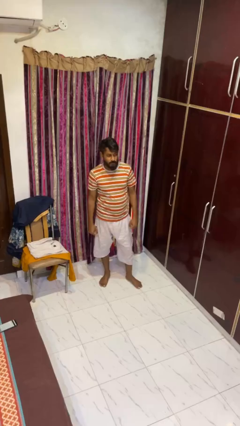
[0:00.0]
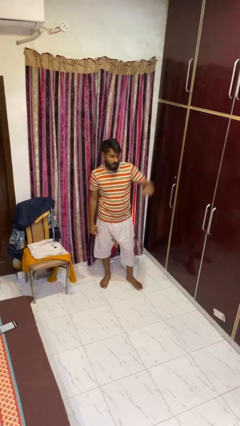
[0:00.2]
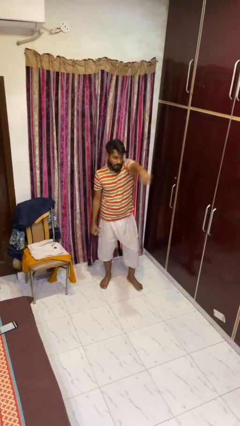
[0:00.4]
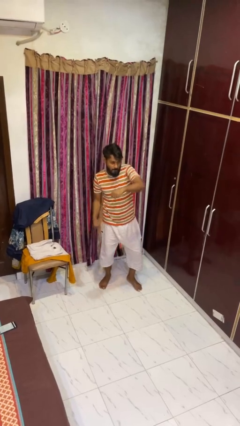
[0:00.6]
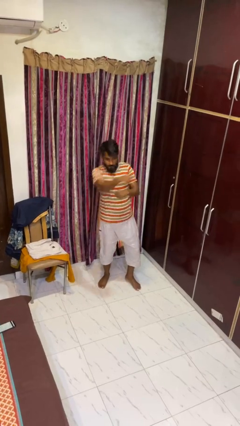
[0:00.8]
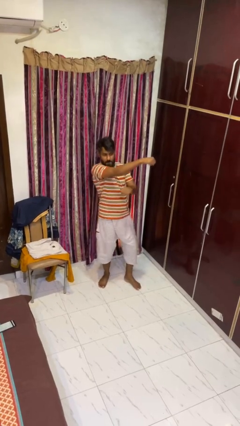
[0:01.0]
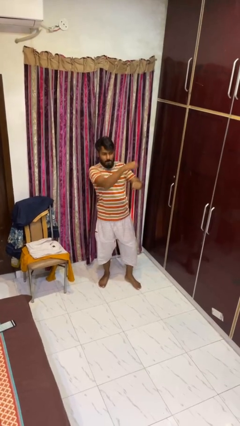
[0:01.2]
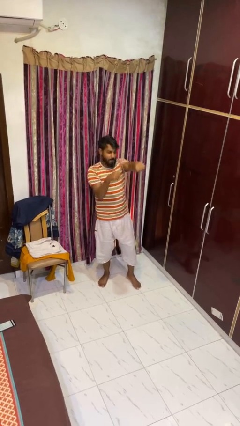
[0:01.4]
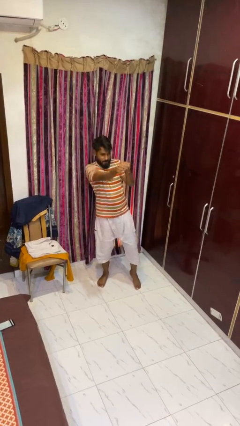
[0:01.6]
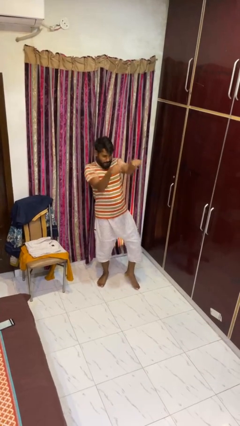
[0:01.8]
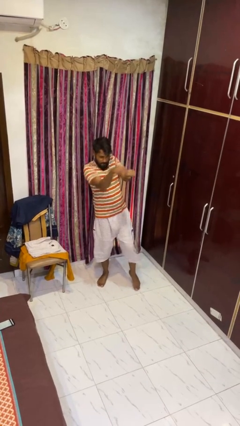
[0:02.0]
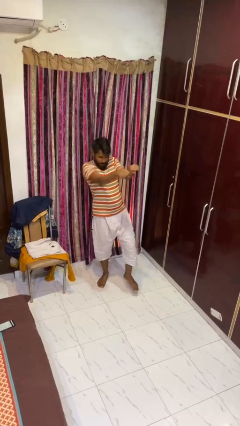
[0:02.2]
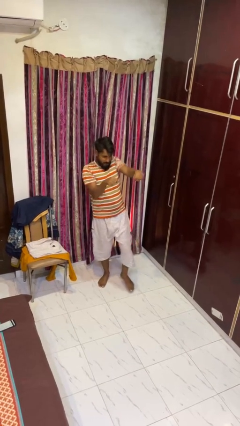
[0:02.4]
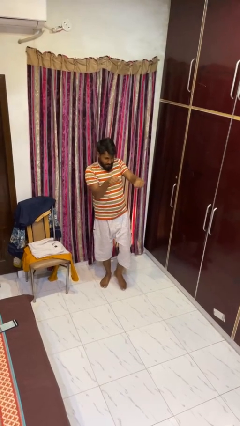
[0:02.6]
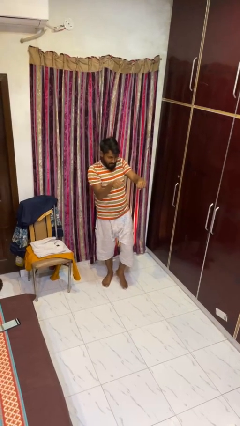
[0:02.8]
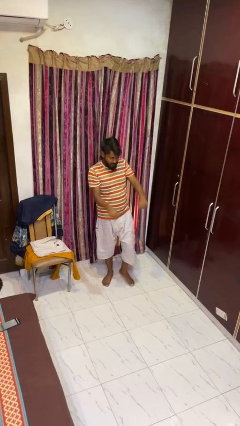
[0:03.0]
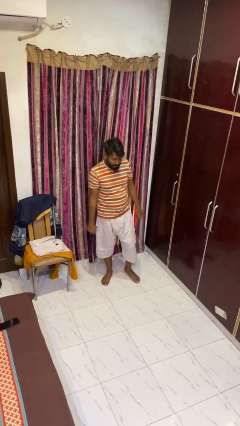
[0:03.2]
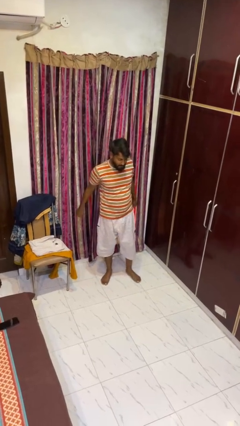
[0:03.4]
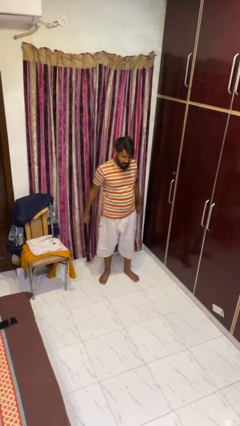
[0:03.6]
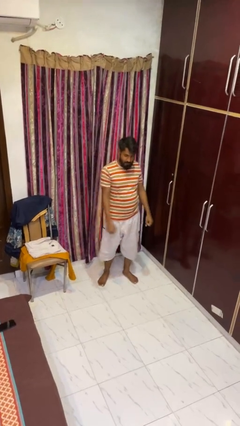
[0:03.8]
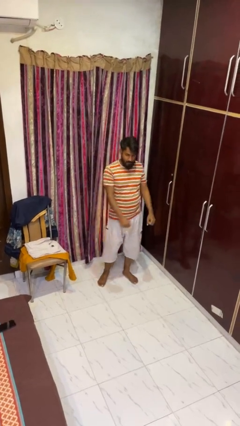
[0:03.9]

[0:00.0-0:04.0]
person punches

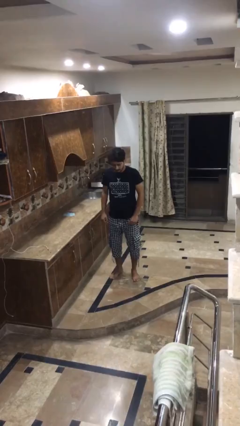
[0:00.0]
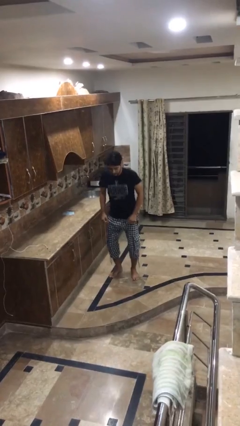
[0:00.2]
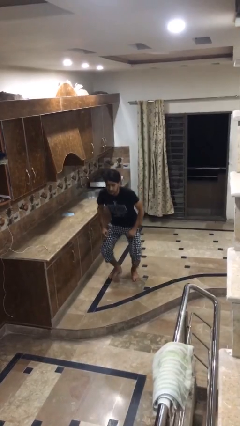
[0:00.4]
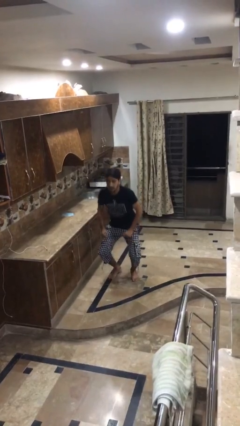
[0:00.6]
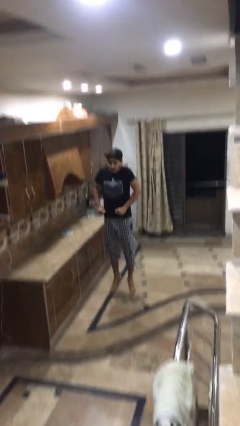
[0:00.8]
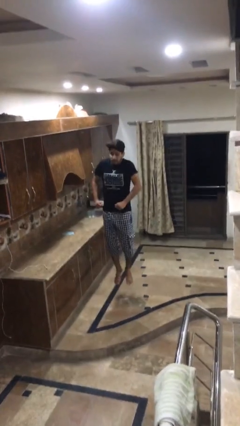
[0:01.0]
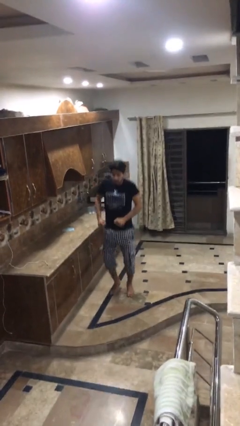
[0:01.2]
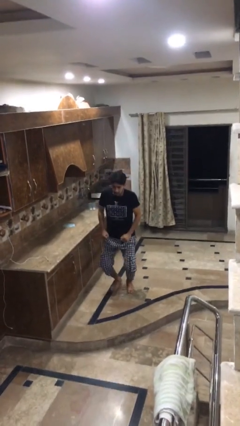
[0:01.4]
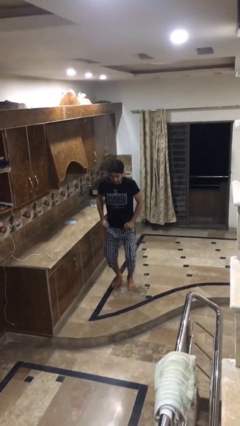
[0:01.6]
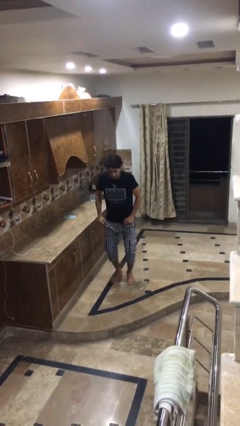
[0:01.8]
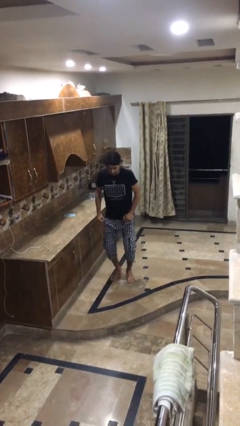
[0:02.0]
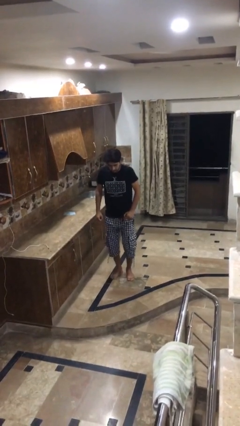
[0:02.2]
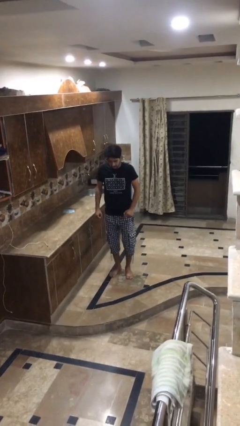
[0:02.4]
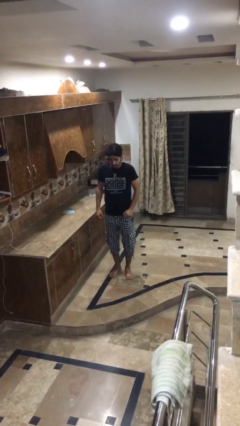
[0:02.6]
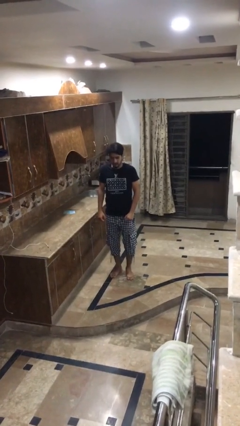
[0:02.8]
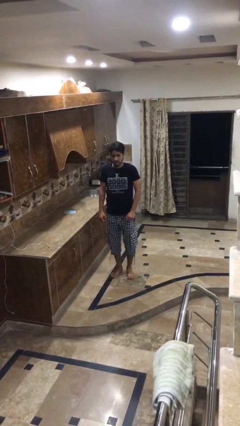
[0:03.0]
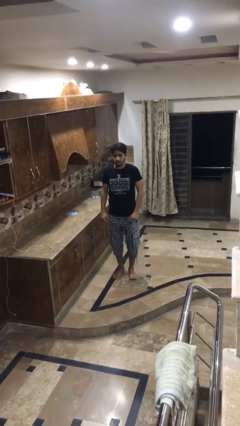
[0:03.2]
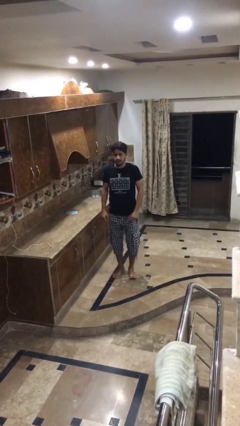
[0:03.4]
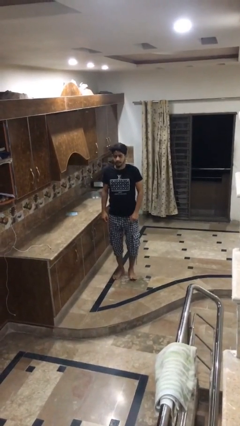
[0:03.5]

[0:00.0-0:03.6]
person jumps

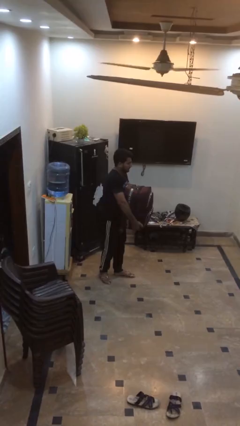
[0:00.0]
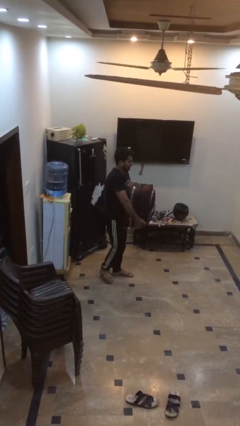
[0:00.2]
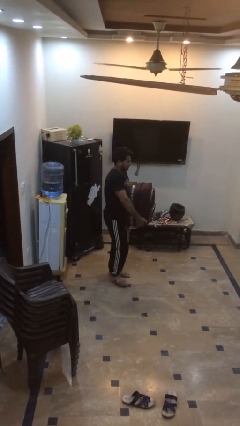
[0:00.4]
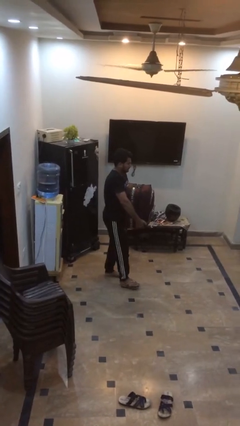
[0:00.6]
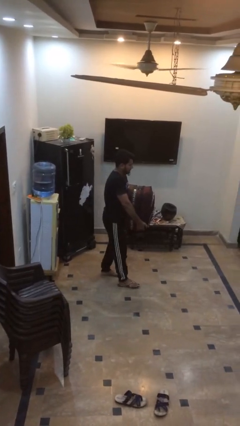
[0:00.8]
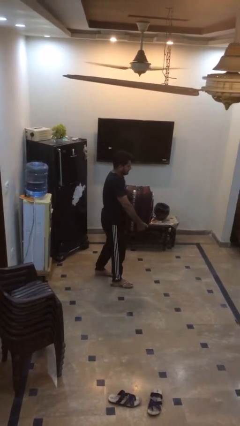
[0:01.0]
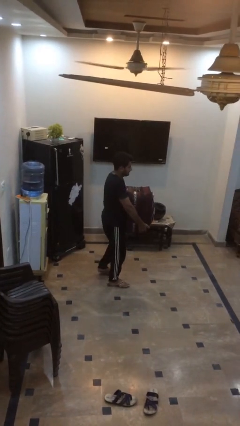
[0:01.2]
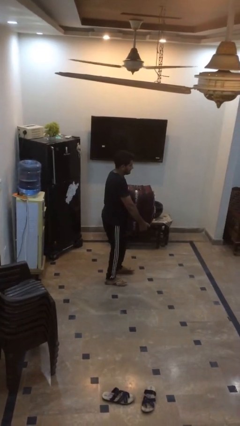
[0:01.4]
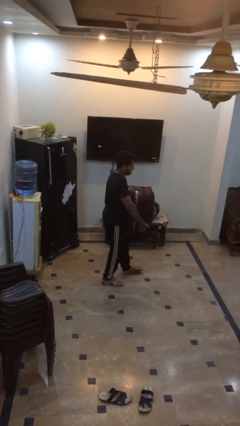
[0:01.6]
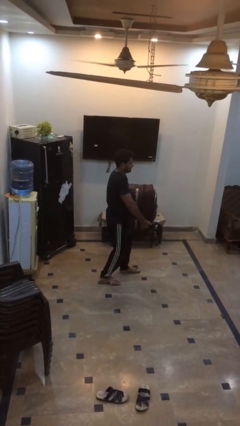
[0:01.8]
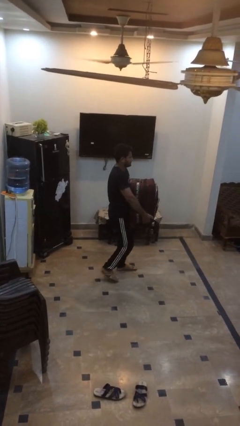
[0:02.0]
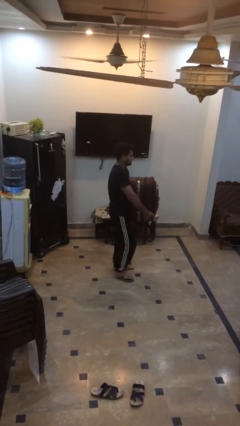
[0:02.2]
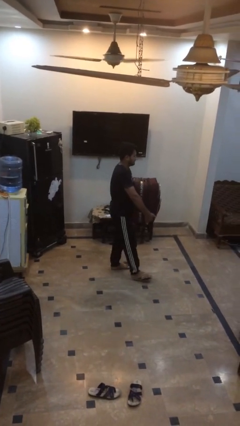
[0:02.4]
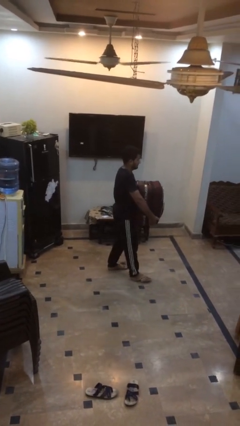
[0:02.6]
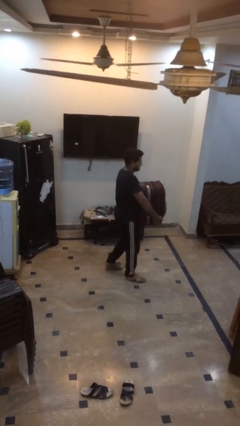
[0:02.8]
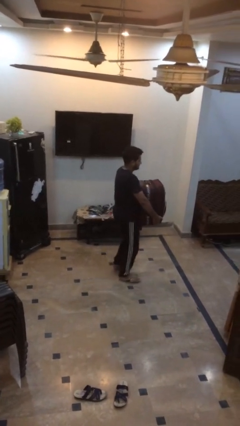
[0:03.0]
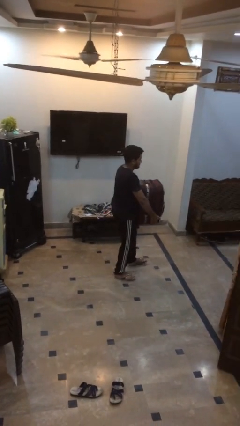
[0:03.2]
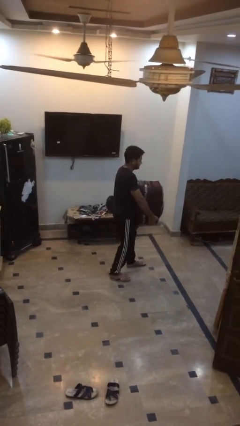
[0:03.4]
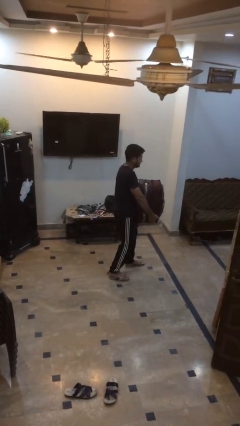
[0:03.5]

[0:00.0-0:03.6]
person carries heavy object

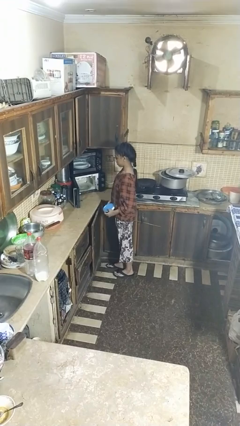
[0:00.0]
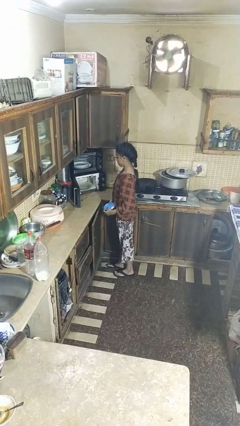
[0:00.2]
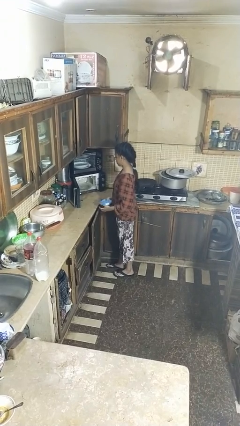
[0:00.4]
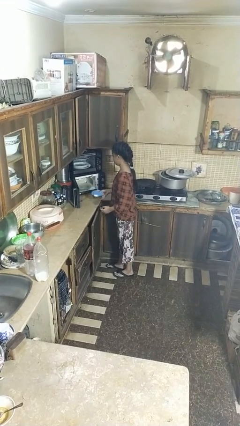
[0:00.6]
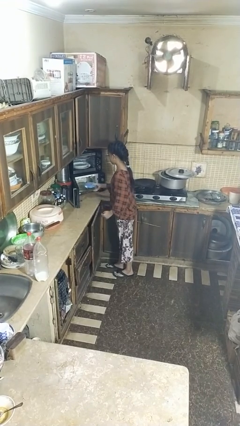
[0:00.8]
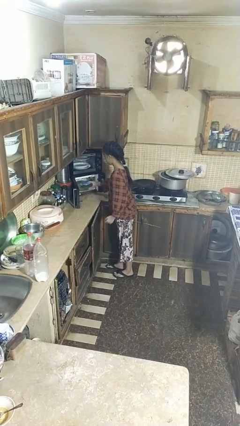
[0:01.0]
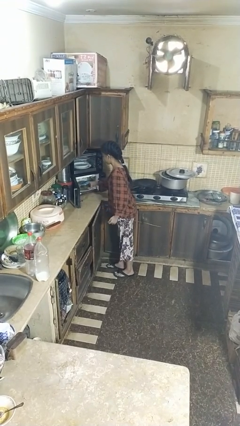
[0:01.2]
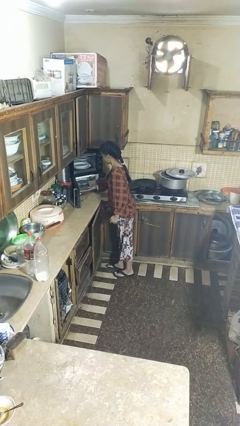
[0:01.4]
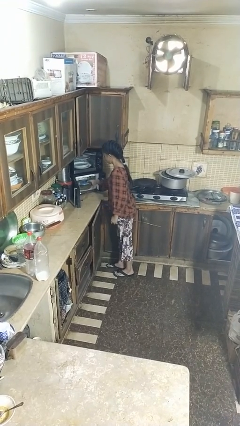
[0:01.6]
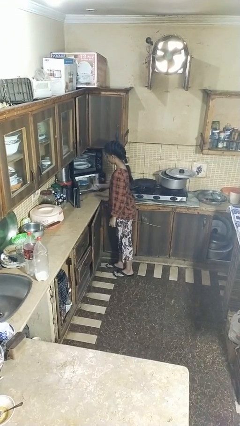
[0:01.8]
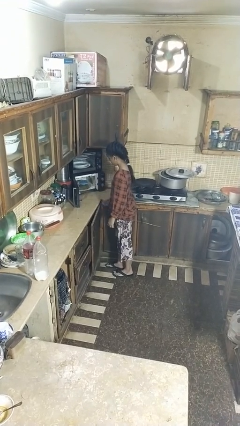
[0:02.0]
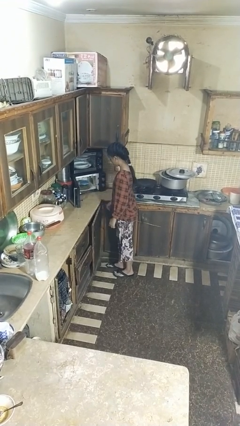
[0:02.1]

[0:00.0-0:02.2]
person puts object into microwave

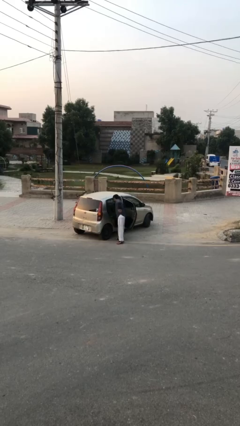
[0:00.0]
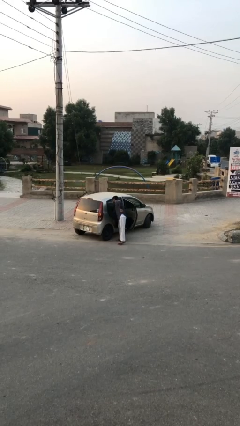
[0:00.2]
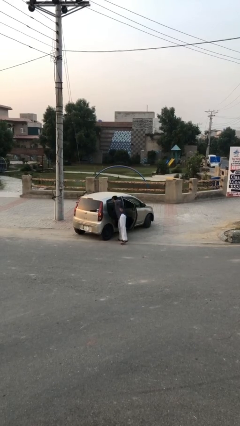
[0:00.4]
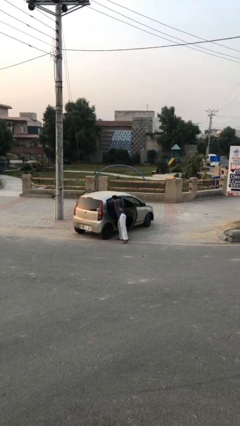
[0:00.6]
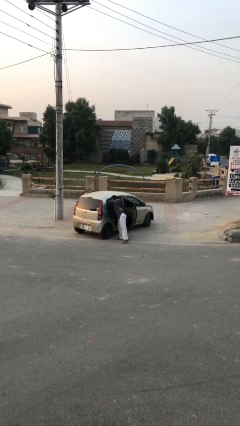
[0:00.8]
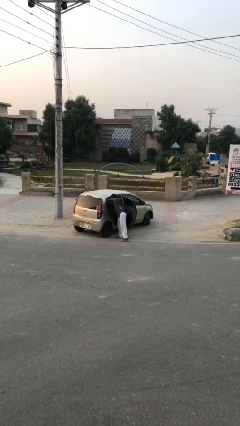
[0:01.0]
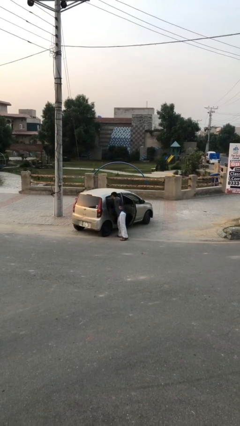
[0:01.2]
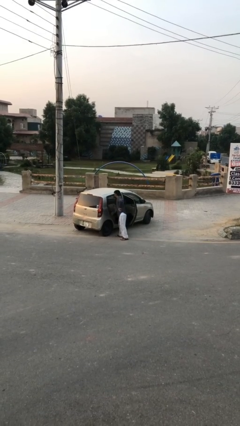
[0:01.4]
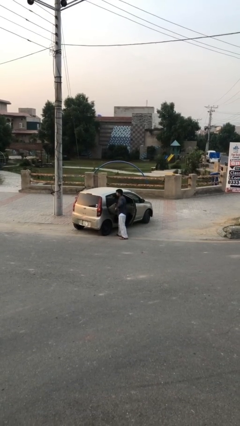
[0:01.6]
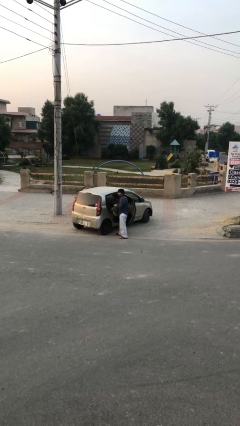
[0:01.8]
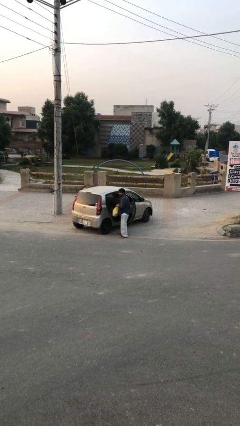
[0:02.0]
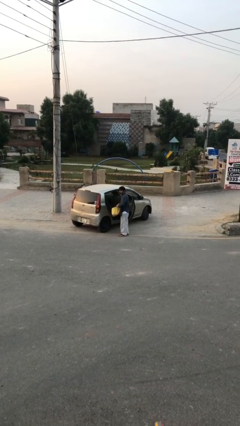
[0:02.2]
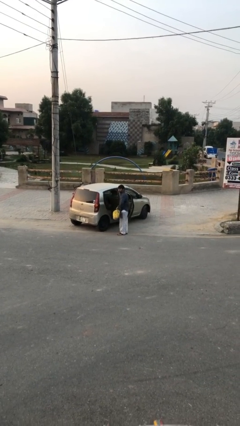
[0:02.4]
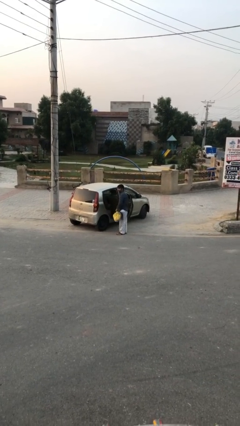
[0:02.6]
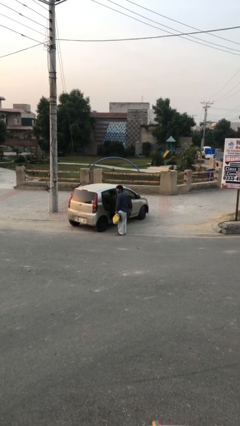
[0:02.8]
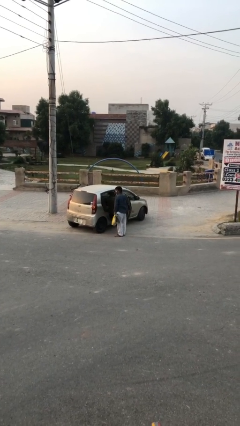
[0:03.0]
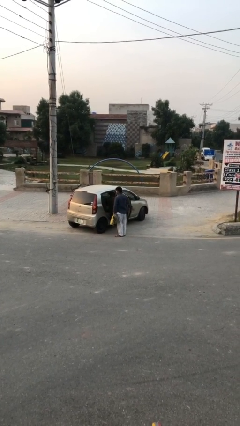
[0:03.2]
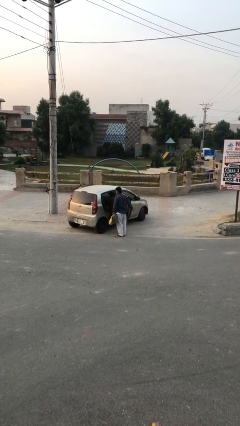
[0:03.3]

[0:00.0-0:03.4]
person unloads car

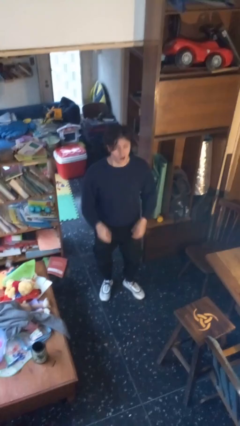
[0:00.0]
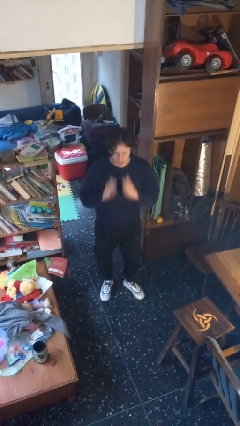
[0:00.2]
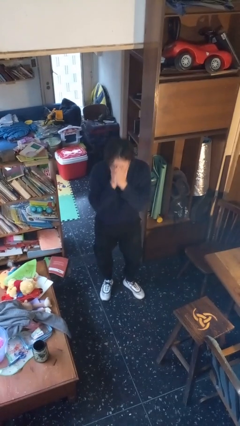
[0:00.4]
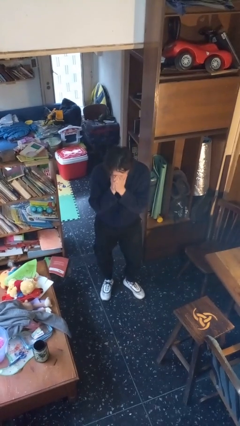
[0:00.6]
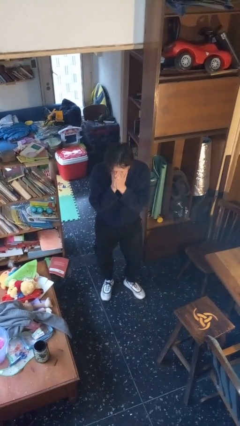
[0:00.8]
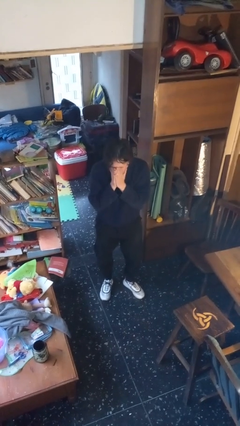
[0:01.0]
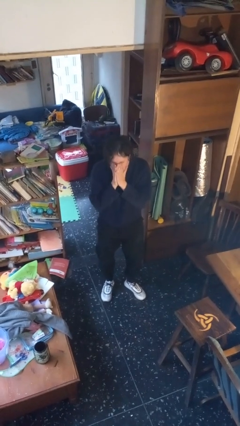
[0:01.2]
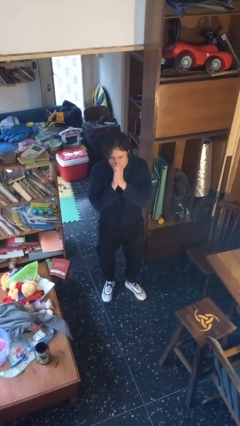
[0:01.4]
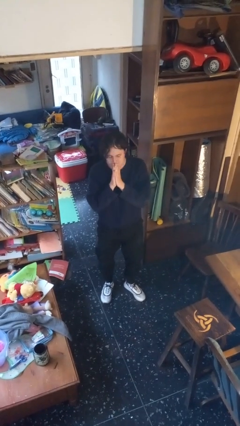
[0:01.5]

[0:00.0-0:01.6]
person sneezes into hand
